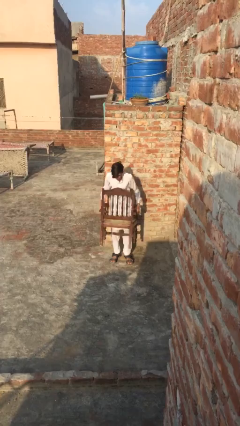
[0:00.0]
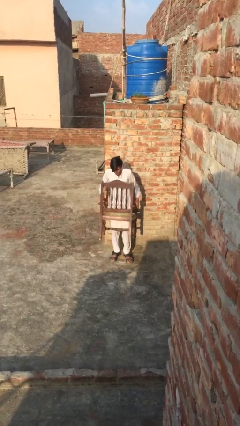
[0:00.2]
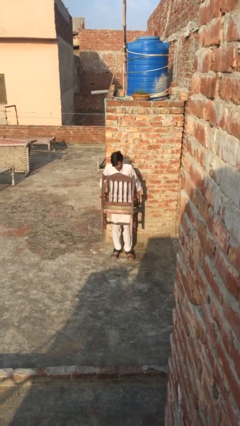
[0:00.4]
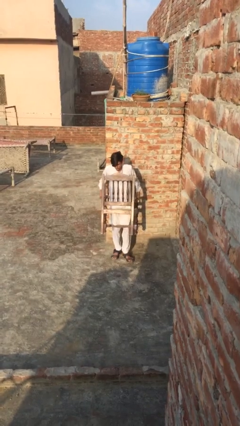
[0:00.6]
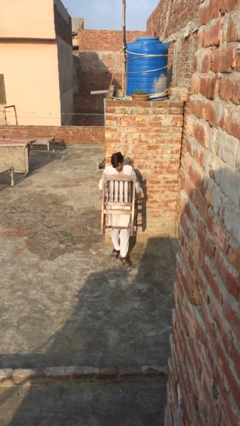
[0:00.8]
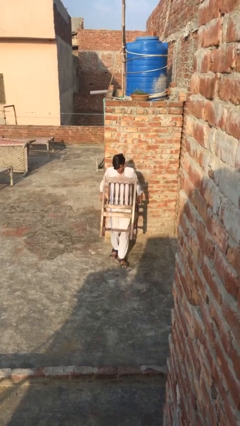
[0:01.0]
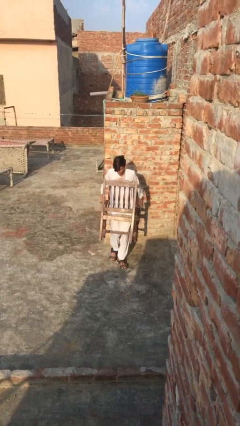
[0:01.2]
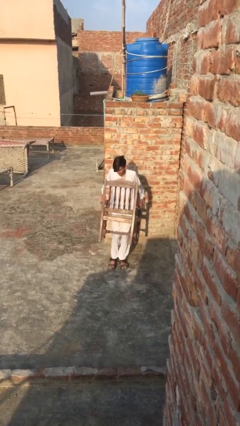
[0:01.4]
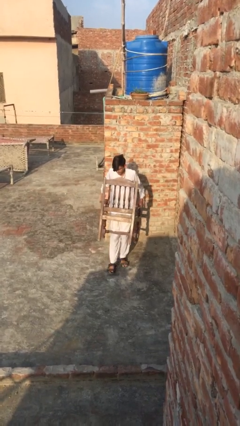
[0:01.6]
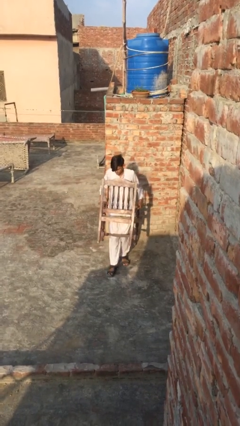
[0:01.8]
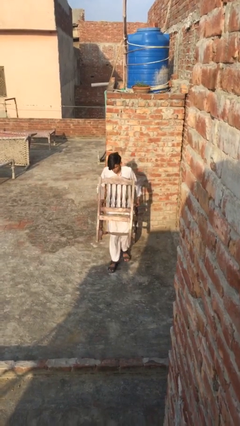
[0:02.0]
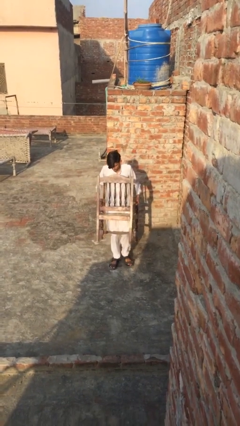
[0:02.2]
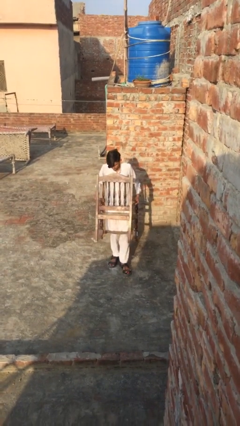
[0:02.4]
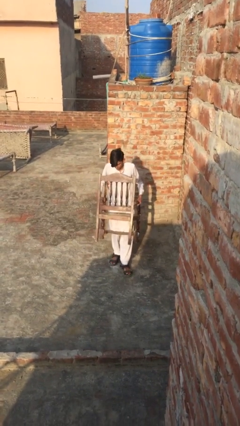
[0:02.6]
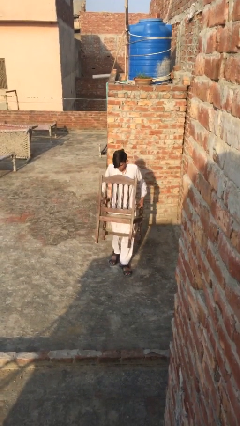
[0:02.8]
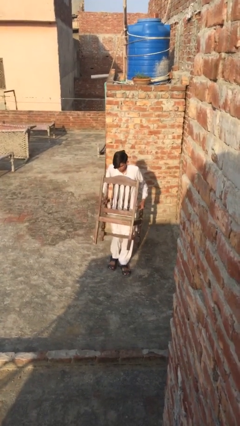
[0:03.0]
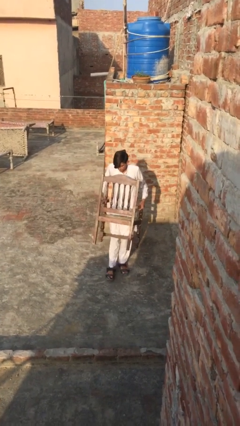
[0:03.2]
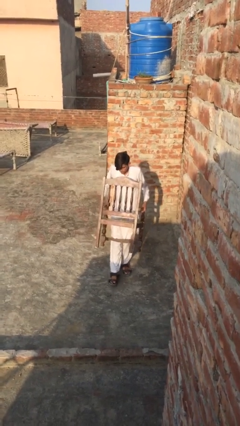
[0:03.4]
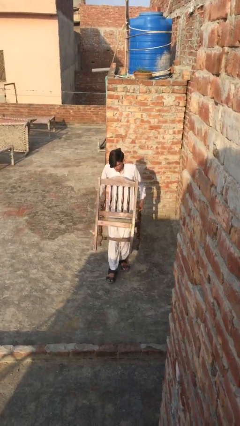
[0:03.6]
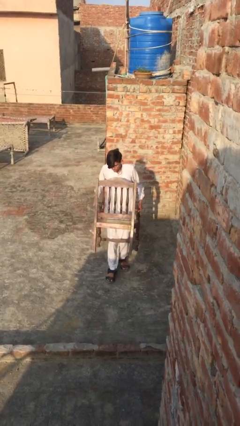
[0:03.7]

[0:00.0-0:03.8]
person carries heavy object

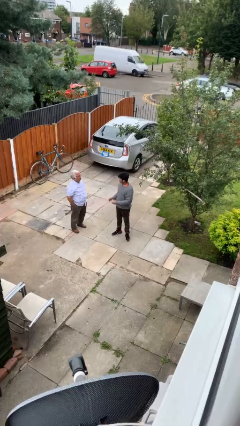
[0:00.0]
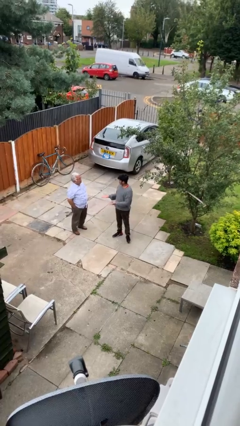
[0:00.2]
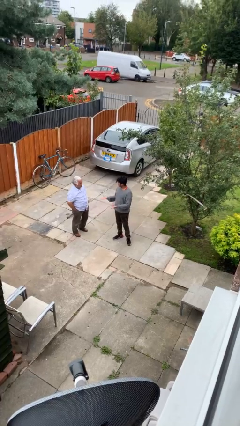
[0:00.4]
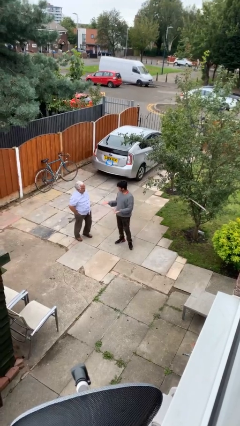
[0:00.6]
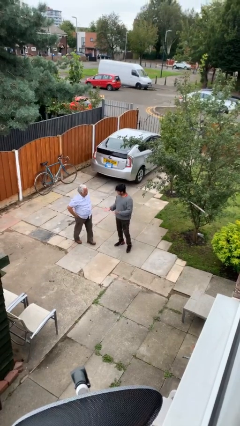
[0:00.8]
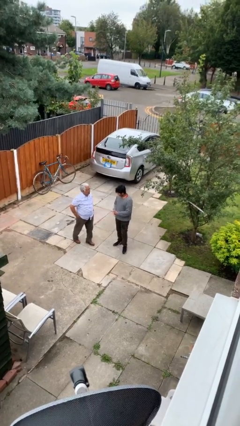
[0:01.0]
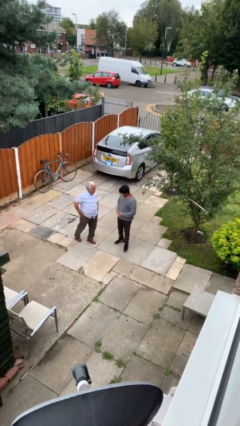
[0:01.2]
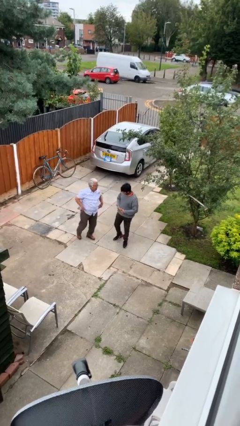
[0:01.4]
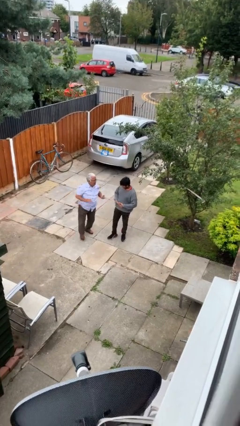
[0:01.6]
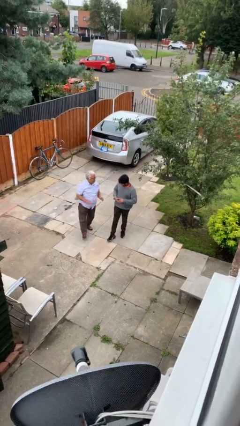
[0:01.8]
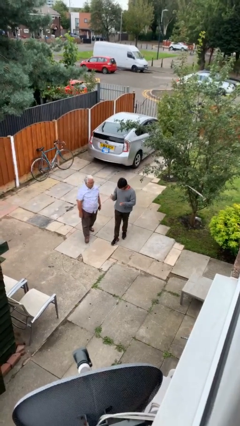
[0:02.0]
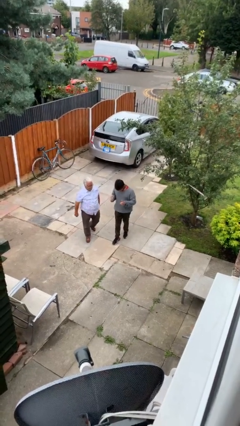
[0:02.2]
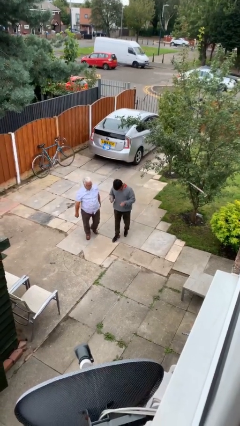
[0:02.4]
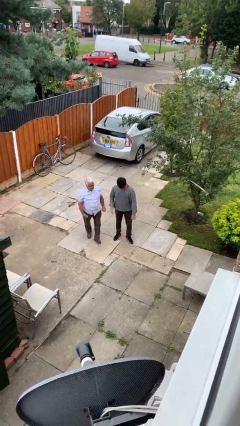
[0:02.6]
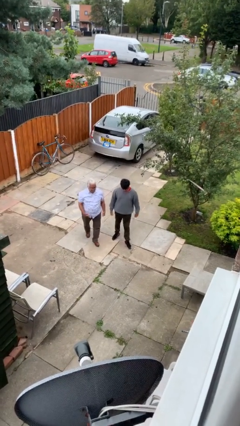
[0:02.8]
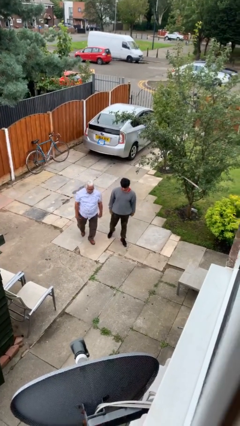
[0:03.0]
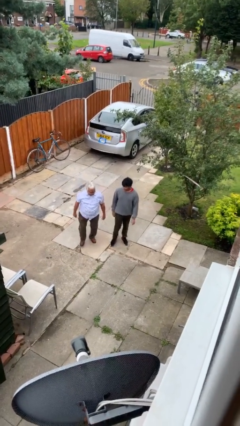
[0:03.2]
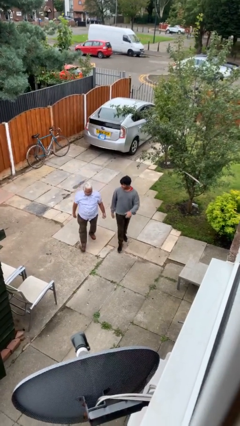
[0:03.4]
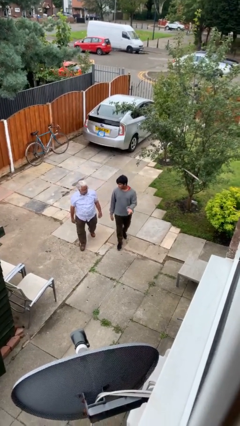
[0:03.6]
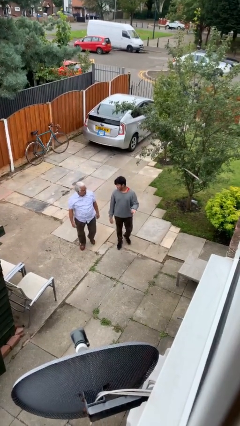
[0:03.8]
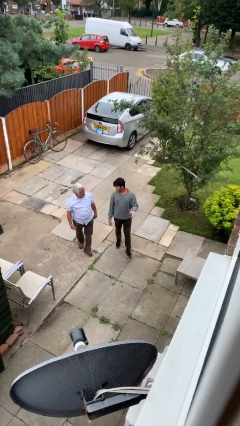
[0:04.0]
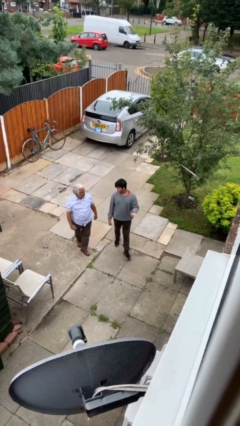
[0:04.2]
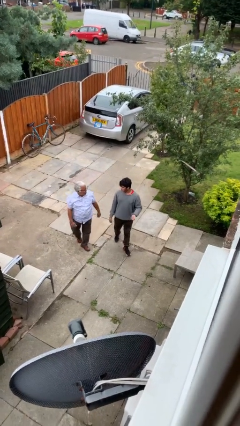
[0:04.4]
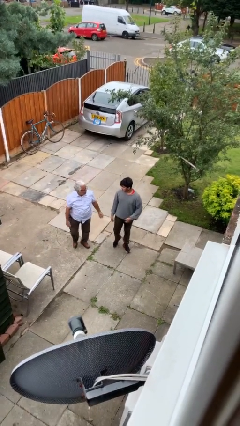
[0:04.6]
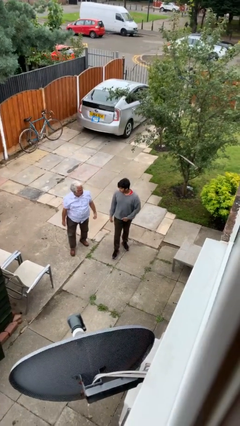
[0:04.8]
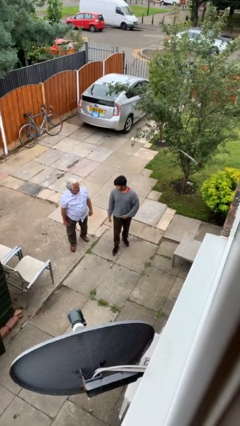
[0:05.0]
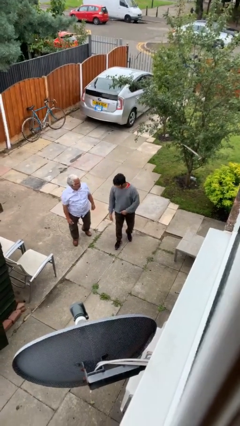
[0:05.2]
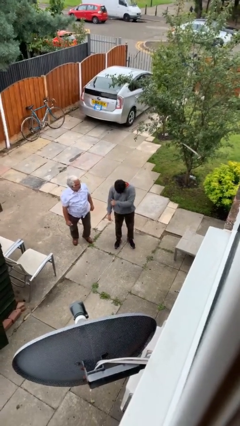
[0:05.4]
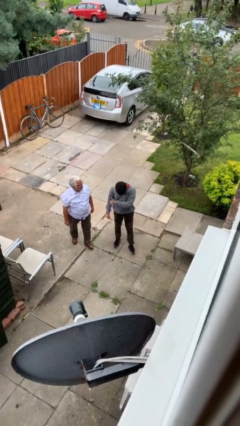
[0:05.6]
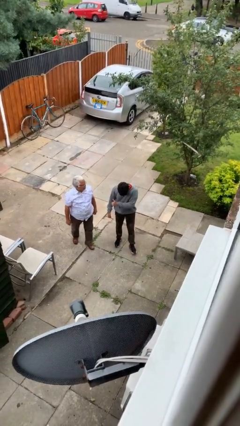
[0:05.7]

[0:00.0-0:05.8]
person talks to person

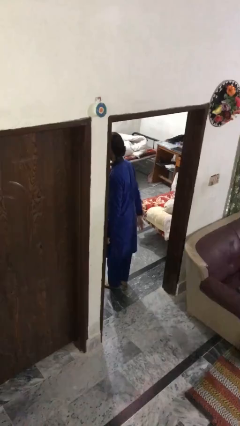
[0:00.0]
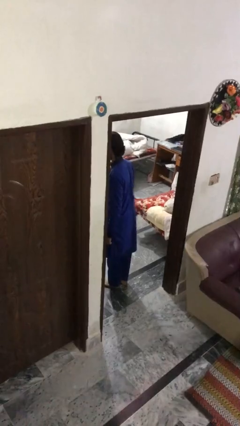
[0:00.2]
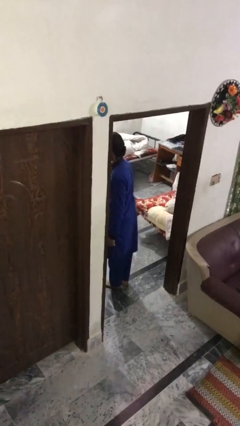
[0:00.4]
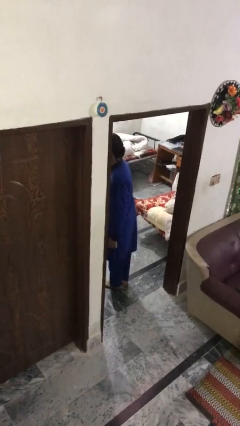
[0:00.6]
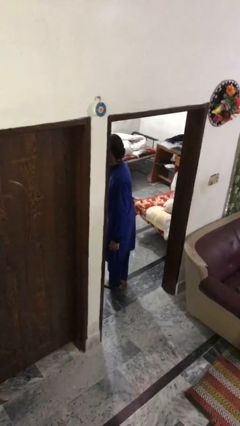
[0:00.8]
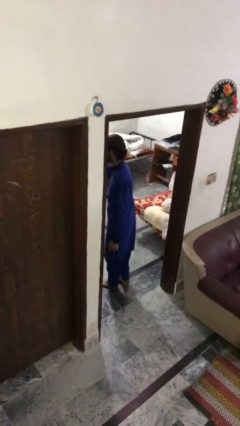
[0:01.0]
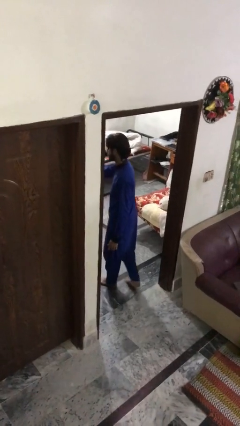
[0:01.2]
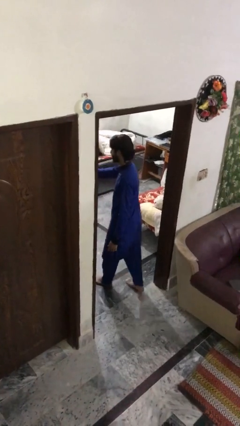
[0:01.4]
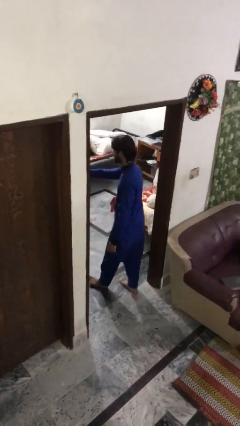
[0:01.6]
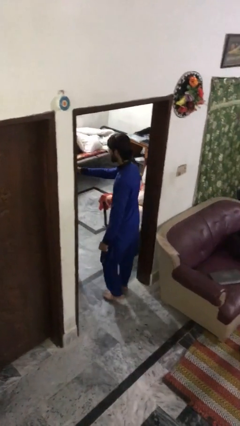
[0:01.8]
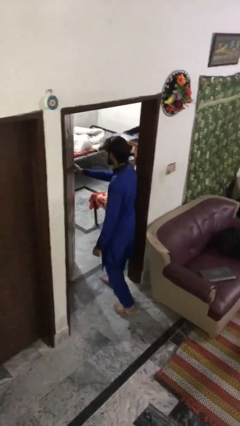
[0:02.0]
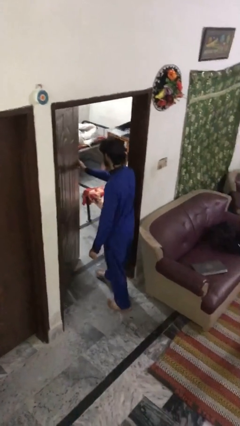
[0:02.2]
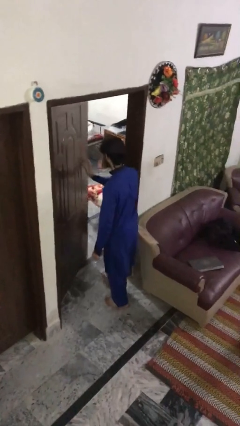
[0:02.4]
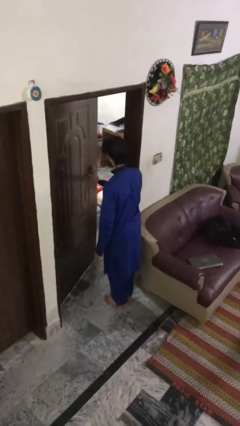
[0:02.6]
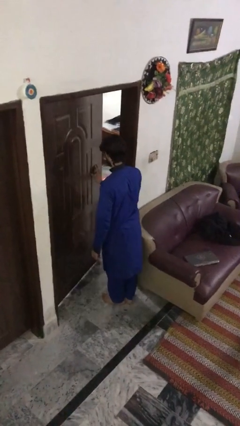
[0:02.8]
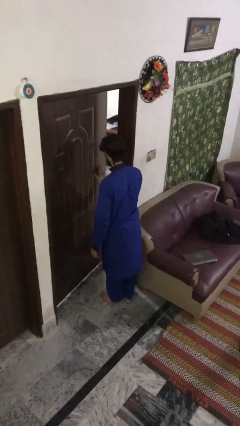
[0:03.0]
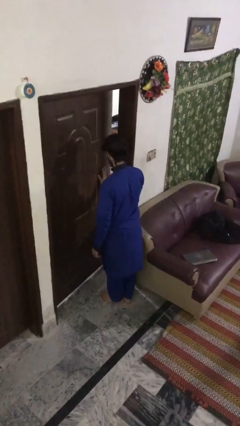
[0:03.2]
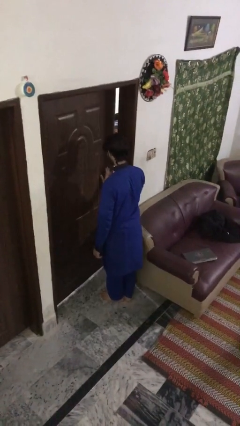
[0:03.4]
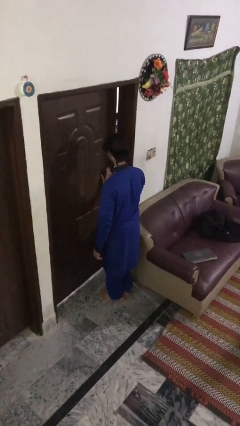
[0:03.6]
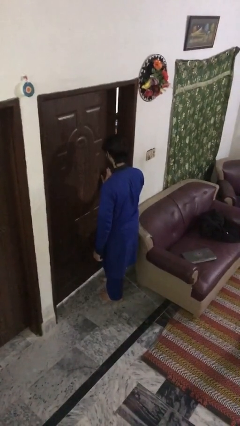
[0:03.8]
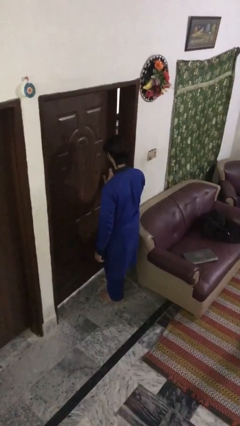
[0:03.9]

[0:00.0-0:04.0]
person closes facility door

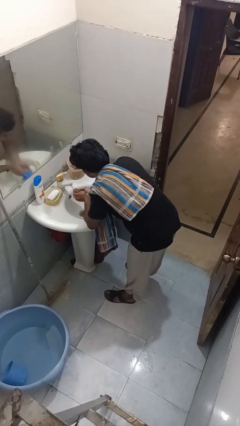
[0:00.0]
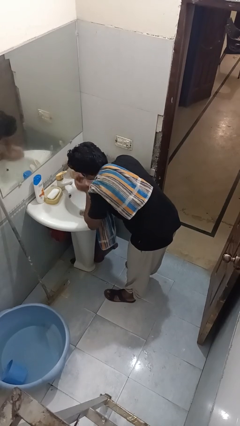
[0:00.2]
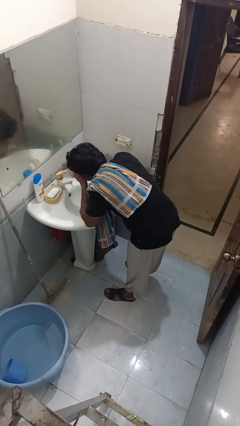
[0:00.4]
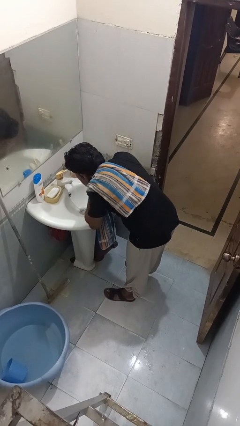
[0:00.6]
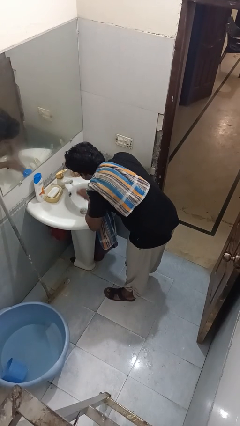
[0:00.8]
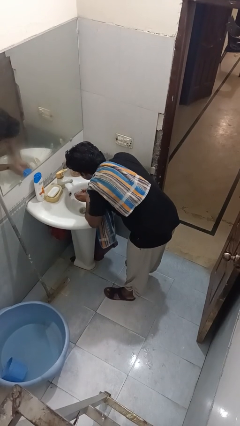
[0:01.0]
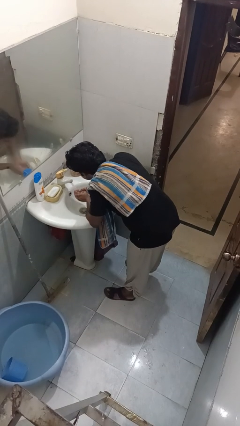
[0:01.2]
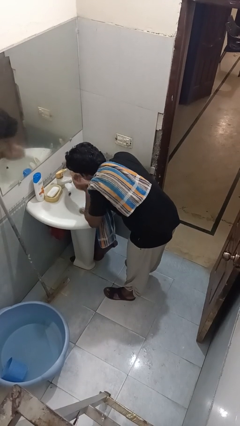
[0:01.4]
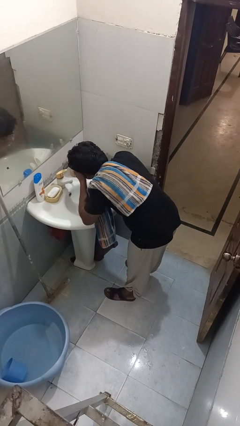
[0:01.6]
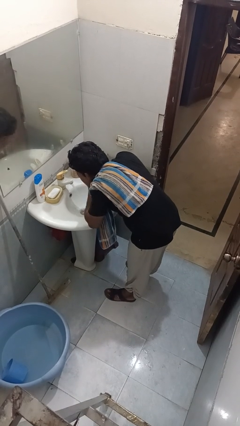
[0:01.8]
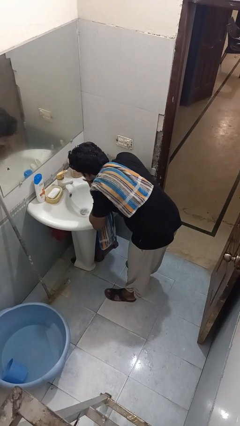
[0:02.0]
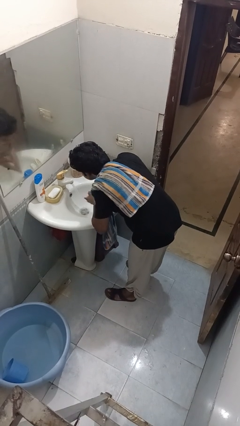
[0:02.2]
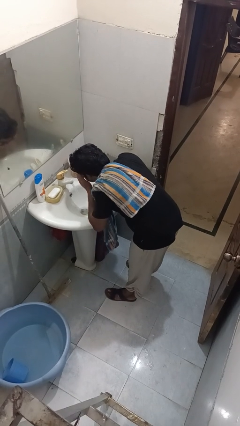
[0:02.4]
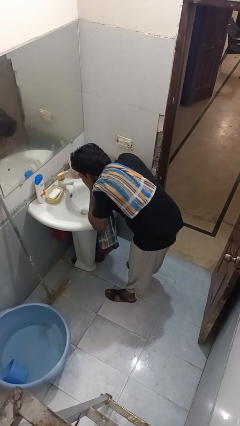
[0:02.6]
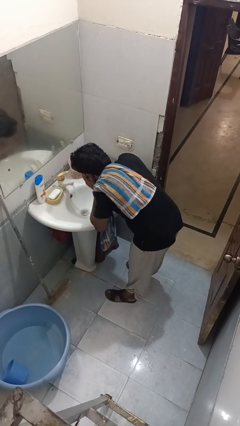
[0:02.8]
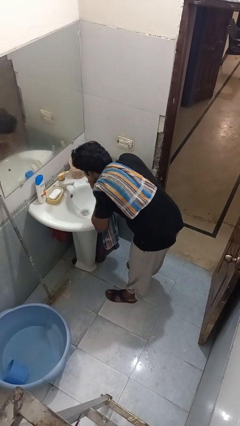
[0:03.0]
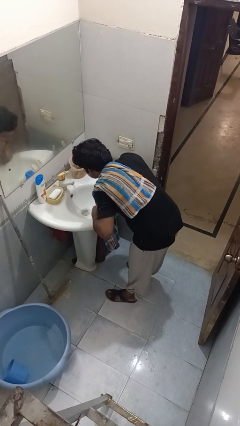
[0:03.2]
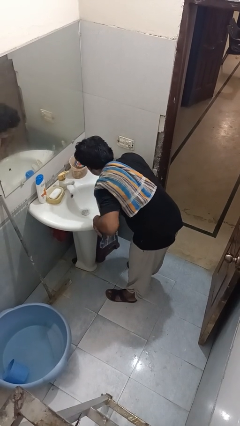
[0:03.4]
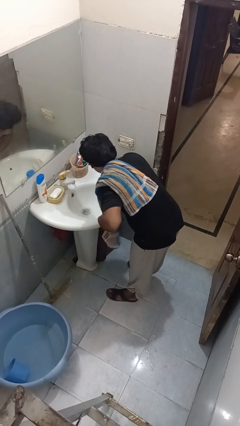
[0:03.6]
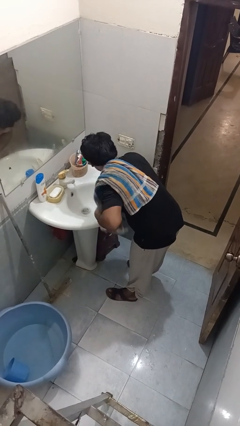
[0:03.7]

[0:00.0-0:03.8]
person washes face

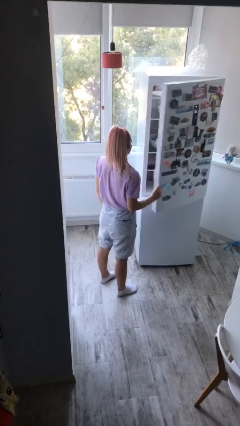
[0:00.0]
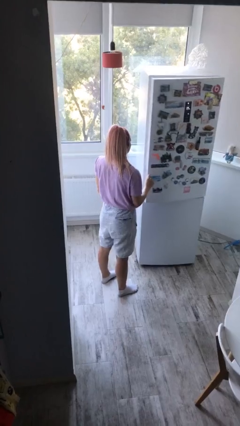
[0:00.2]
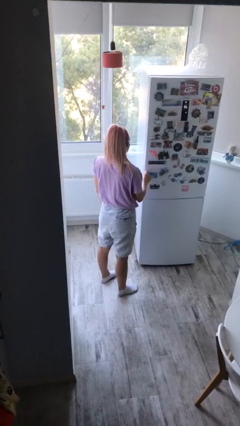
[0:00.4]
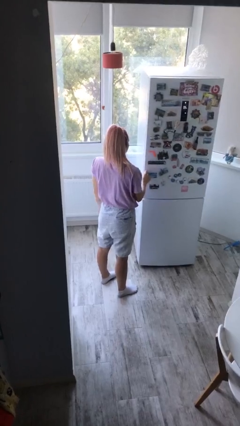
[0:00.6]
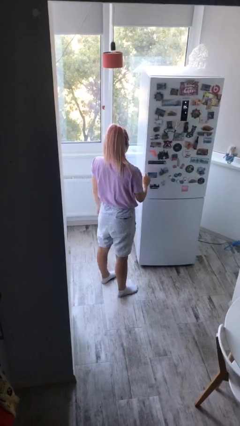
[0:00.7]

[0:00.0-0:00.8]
person closes refrigerator
